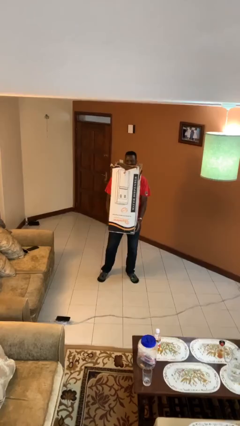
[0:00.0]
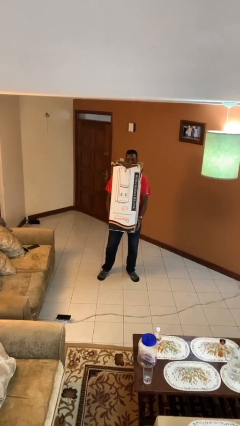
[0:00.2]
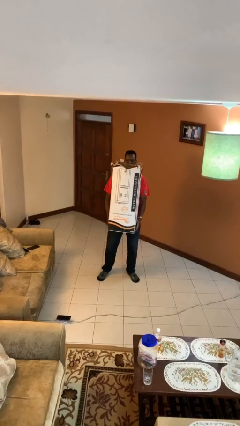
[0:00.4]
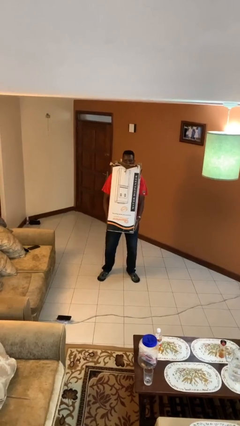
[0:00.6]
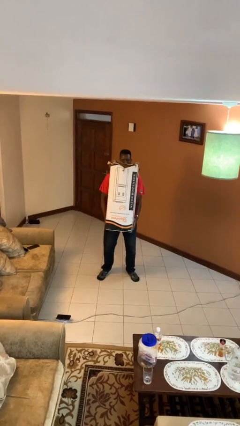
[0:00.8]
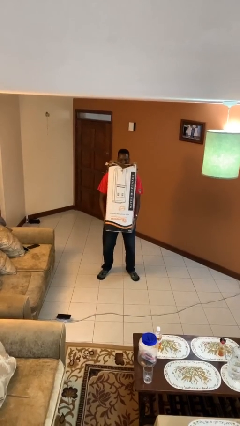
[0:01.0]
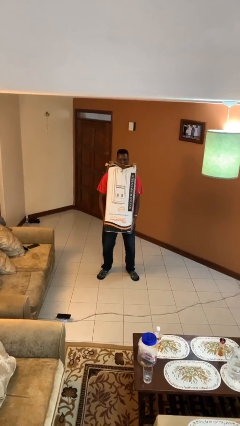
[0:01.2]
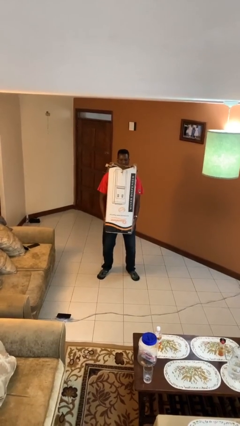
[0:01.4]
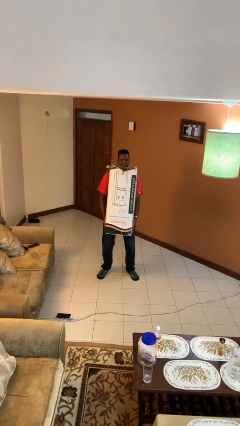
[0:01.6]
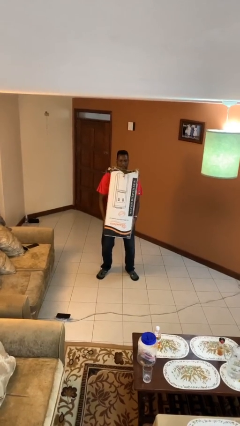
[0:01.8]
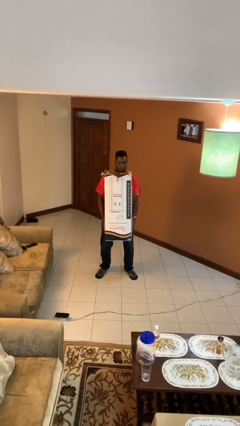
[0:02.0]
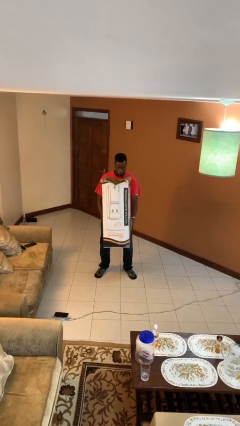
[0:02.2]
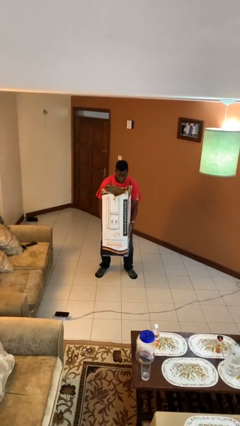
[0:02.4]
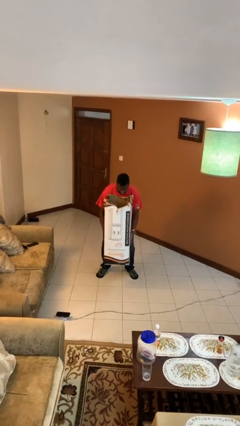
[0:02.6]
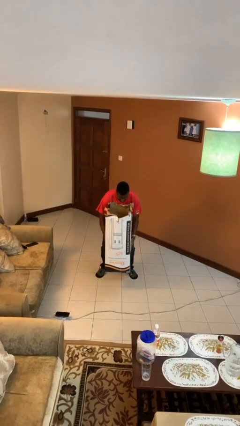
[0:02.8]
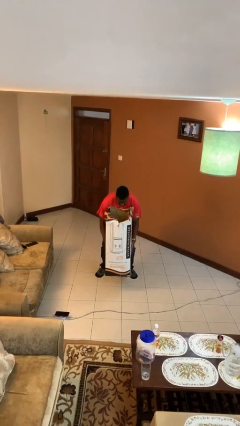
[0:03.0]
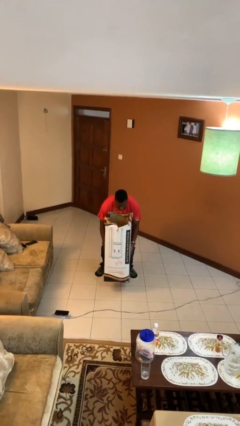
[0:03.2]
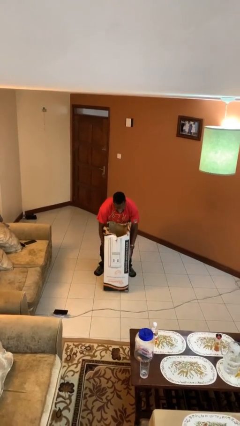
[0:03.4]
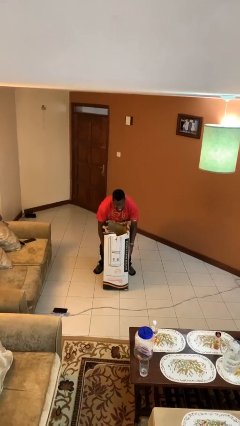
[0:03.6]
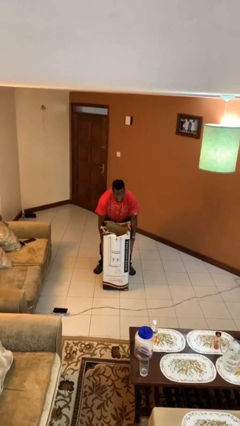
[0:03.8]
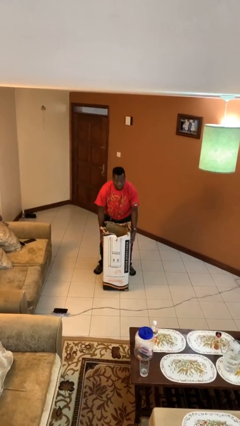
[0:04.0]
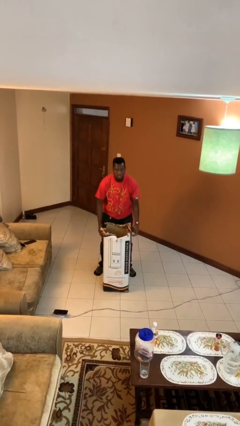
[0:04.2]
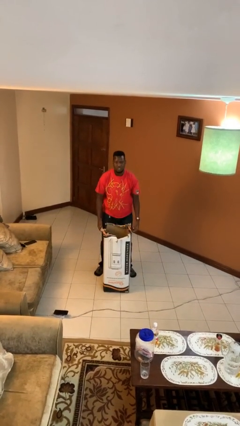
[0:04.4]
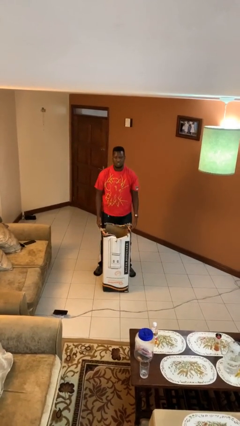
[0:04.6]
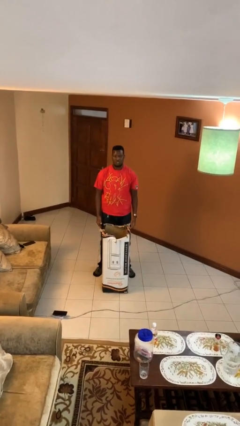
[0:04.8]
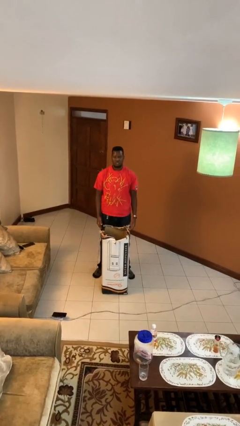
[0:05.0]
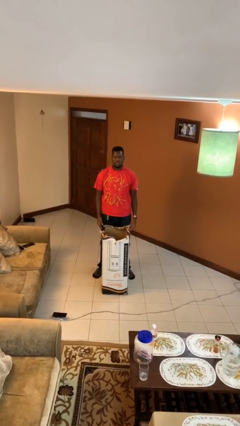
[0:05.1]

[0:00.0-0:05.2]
person puts down object on floor

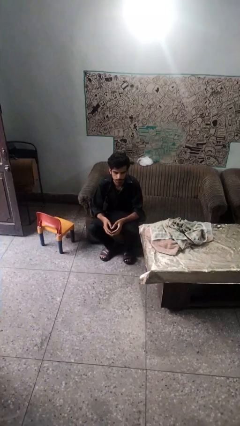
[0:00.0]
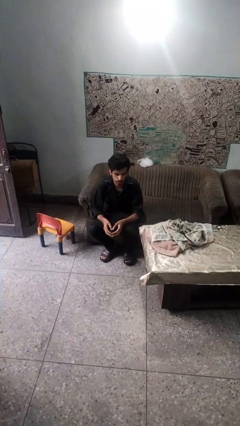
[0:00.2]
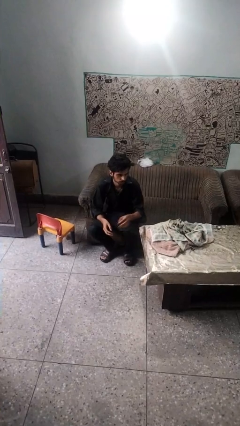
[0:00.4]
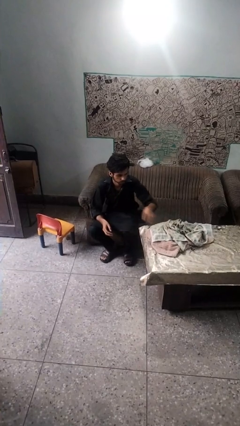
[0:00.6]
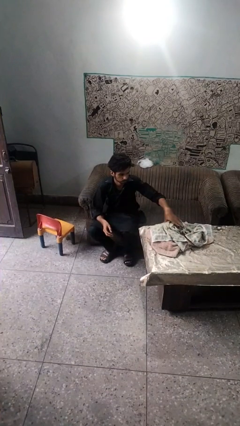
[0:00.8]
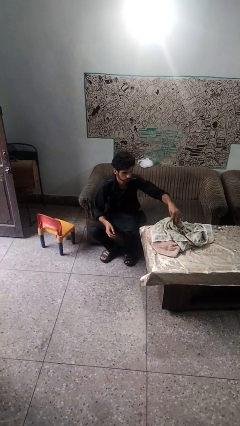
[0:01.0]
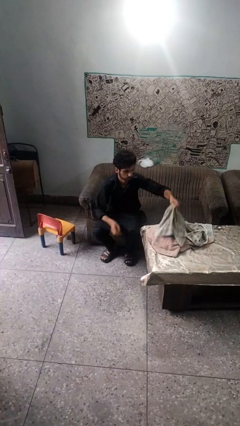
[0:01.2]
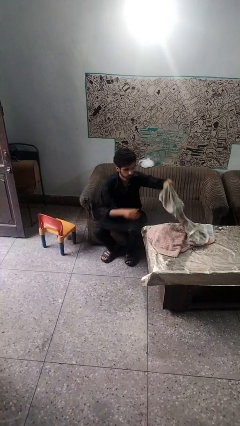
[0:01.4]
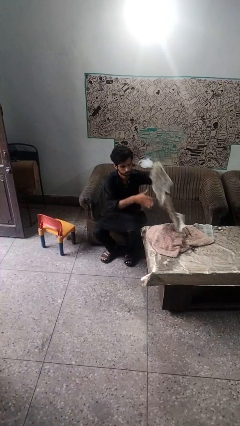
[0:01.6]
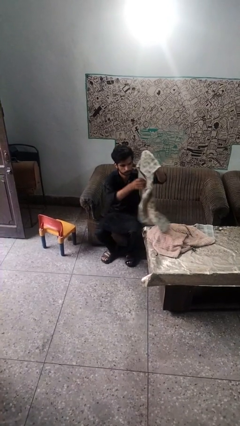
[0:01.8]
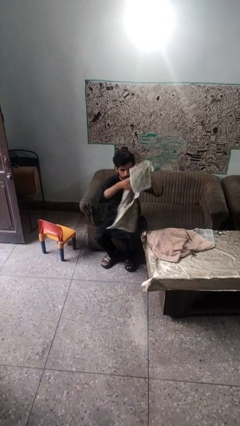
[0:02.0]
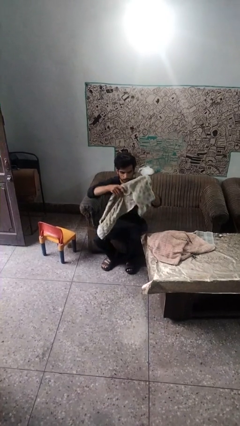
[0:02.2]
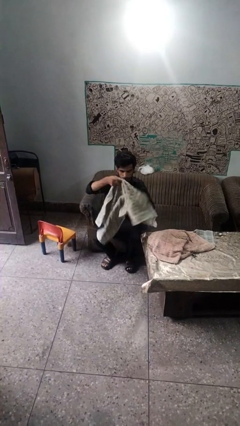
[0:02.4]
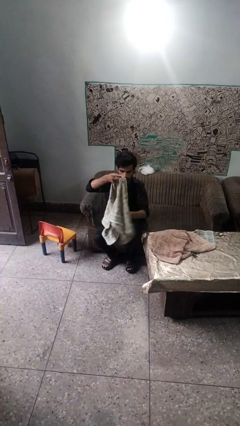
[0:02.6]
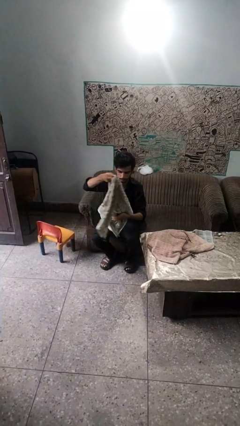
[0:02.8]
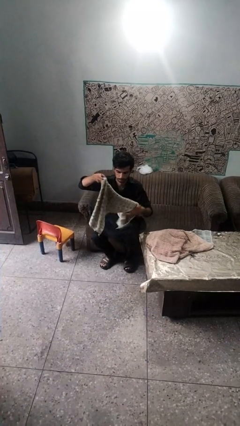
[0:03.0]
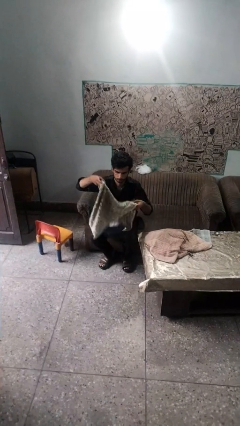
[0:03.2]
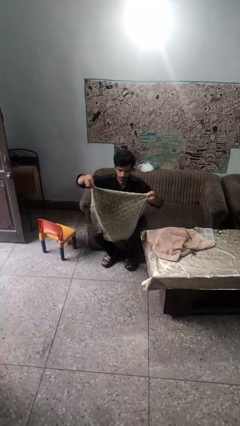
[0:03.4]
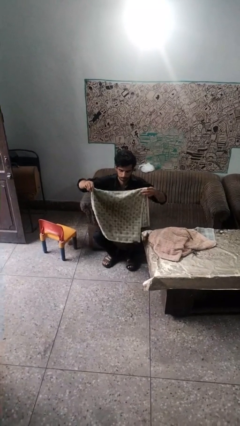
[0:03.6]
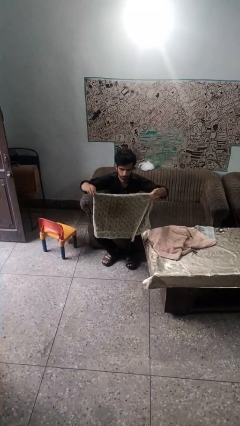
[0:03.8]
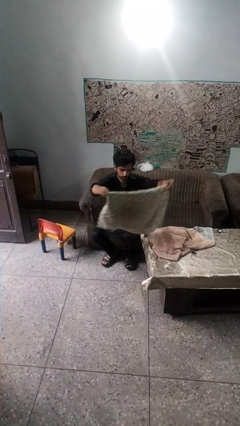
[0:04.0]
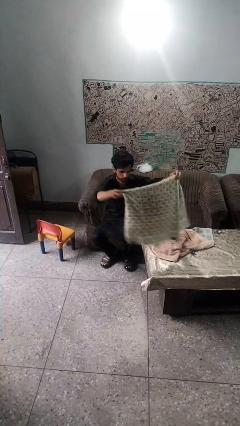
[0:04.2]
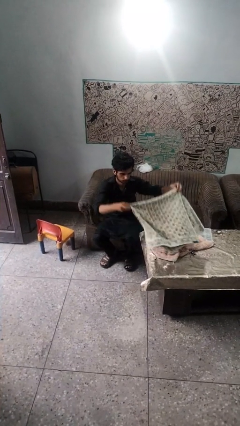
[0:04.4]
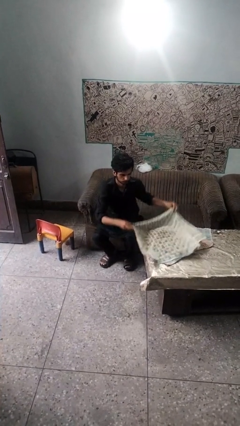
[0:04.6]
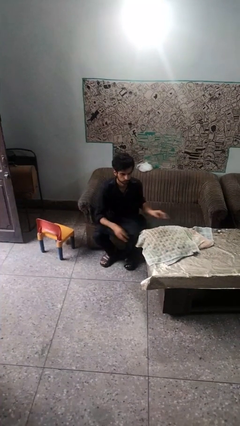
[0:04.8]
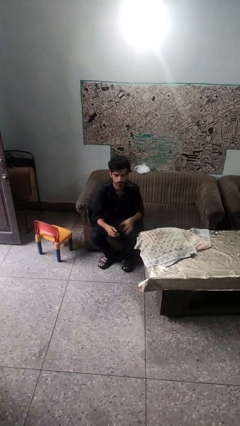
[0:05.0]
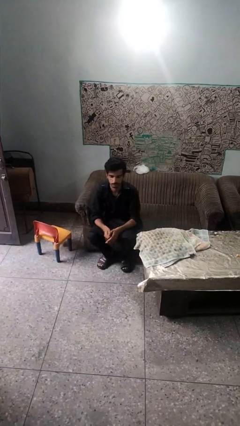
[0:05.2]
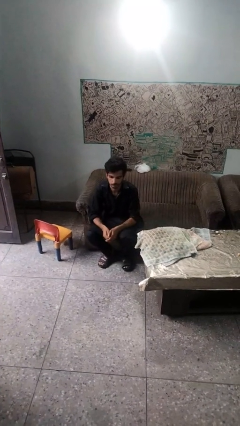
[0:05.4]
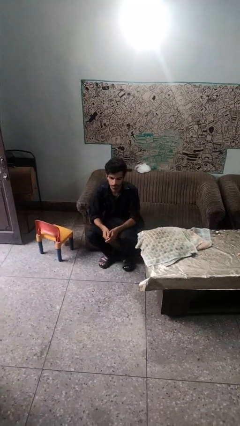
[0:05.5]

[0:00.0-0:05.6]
person folds towel

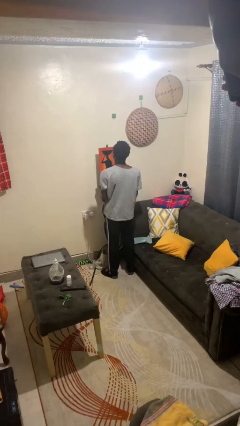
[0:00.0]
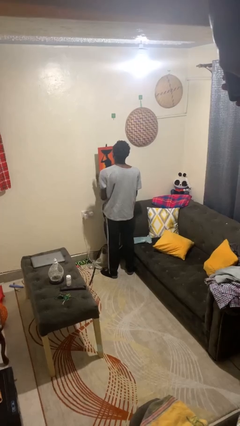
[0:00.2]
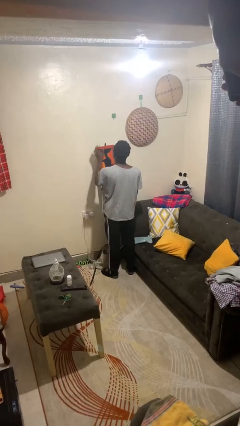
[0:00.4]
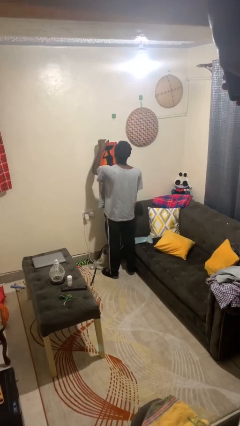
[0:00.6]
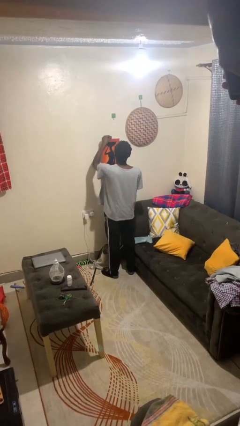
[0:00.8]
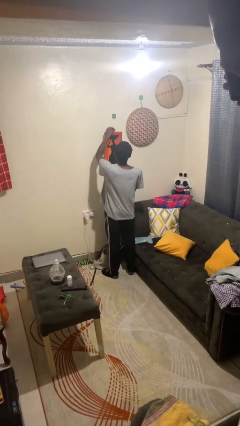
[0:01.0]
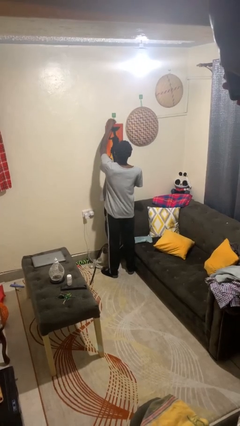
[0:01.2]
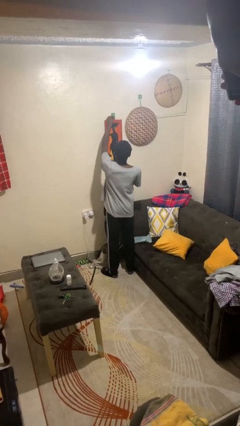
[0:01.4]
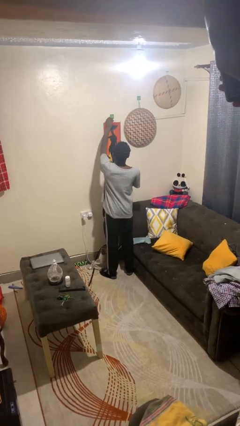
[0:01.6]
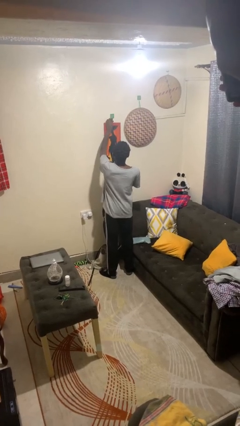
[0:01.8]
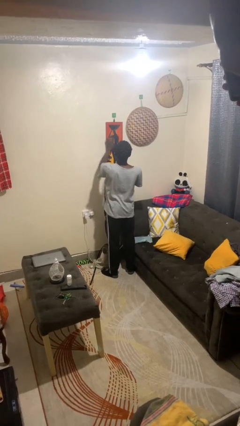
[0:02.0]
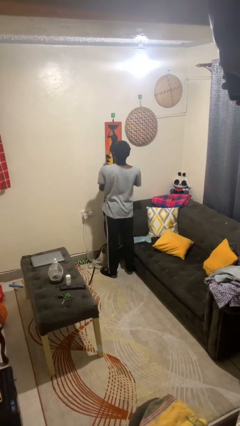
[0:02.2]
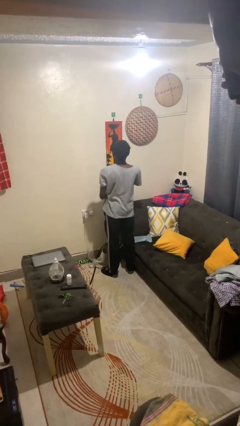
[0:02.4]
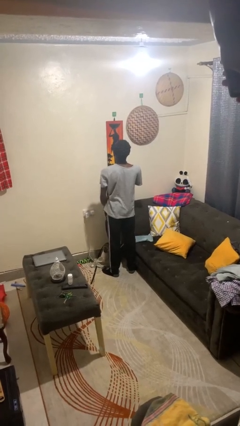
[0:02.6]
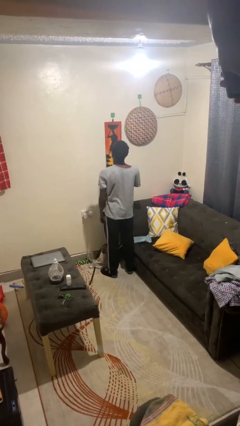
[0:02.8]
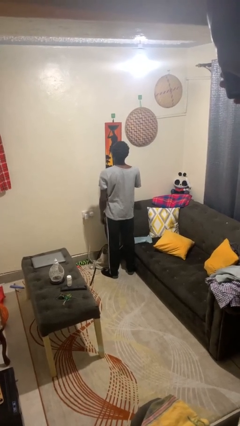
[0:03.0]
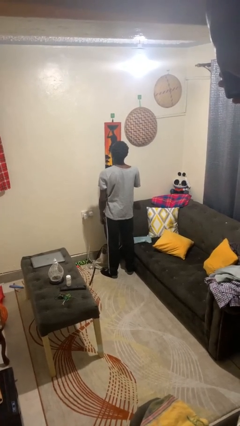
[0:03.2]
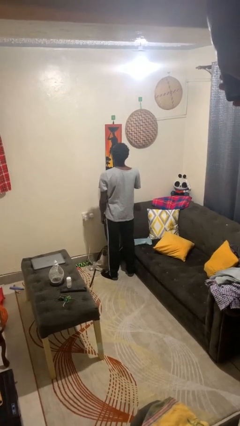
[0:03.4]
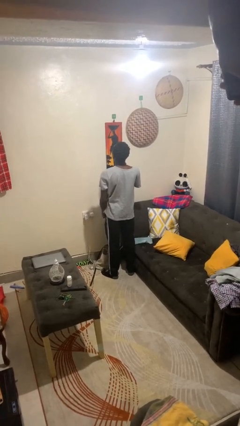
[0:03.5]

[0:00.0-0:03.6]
person puts up picture frame

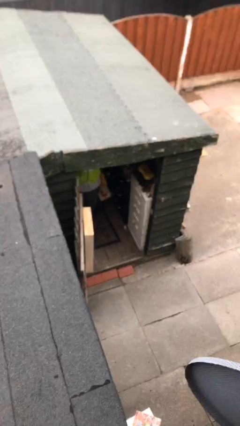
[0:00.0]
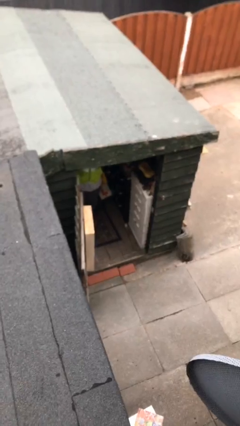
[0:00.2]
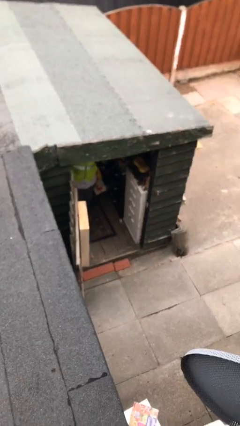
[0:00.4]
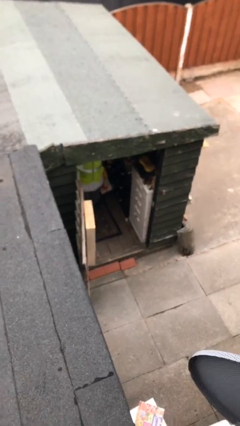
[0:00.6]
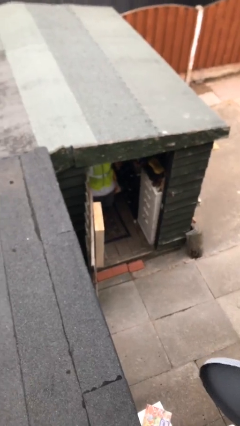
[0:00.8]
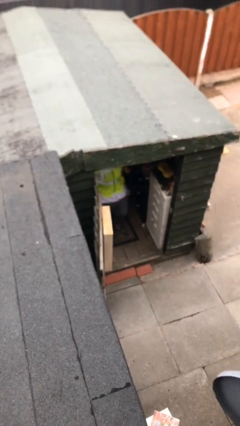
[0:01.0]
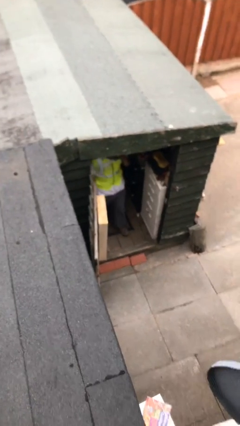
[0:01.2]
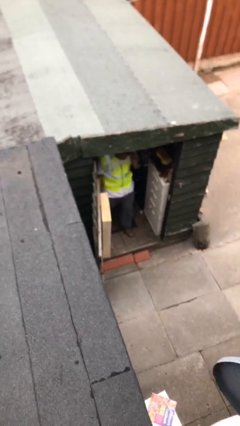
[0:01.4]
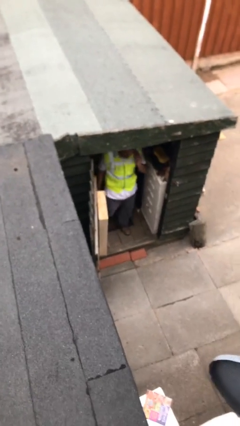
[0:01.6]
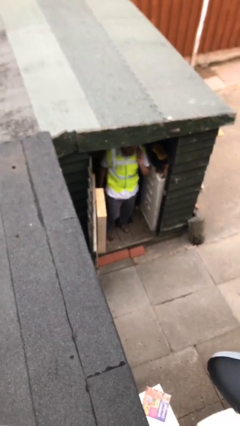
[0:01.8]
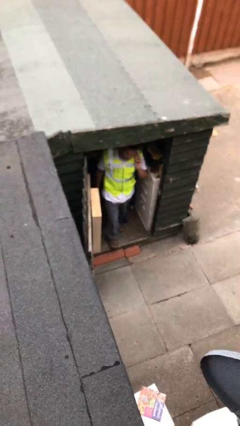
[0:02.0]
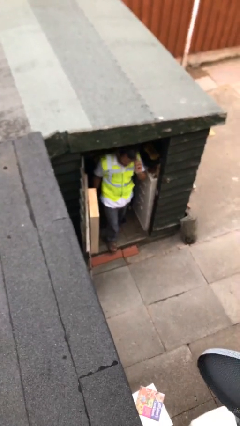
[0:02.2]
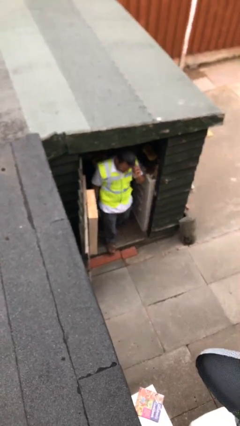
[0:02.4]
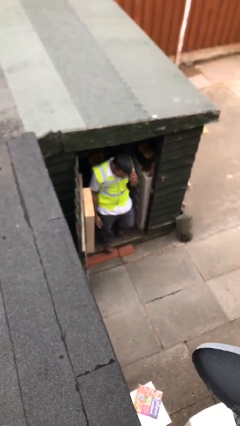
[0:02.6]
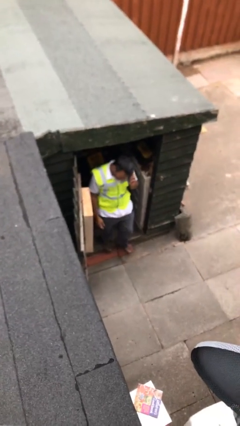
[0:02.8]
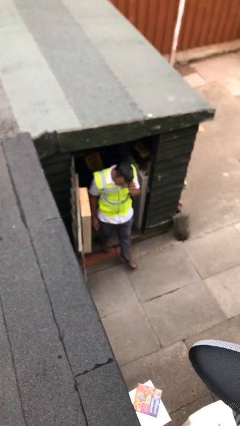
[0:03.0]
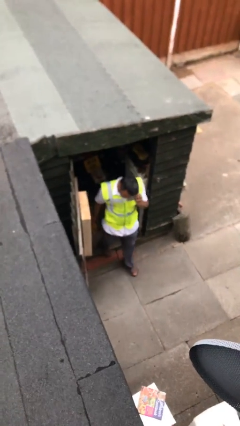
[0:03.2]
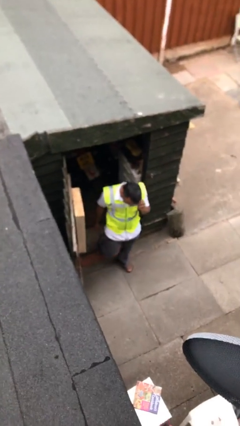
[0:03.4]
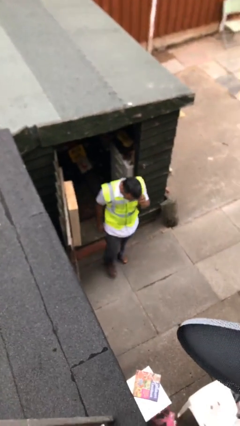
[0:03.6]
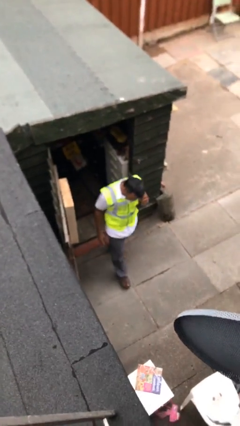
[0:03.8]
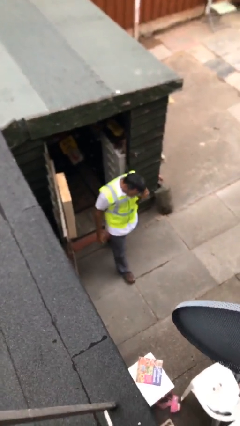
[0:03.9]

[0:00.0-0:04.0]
person enters scene through structure
